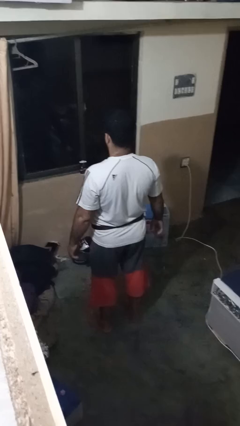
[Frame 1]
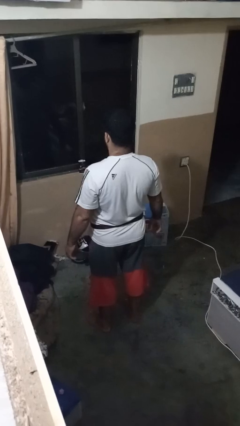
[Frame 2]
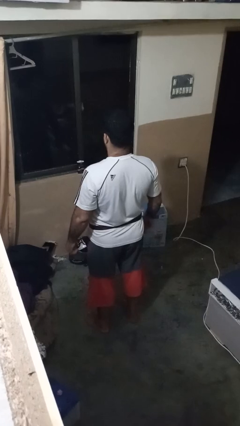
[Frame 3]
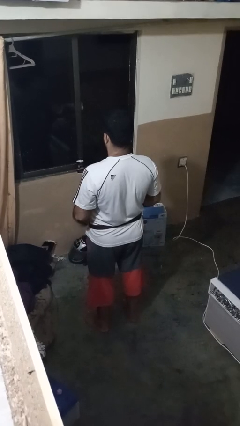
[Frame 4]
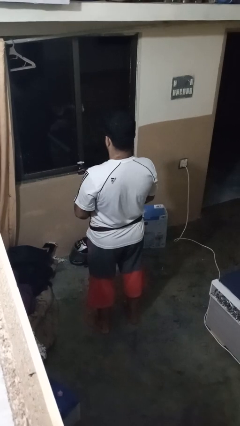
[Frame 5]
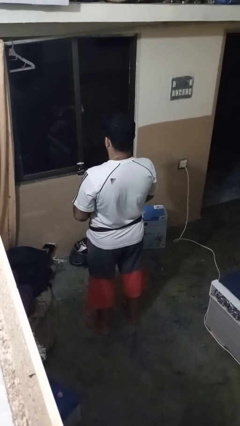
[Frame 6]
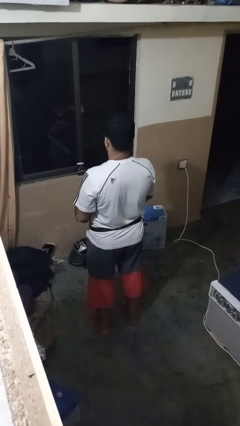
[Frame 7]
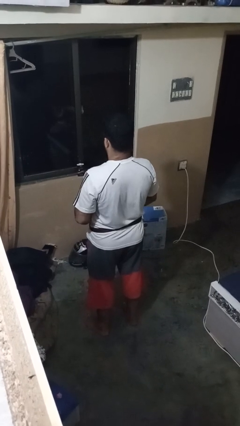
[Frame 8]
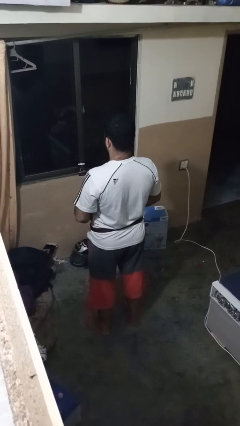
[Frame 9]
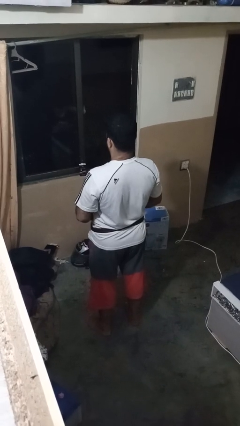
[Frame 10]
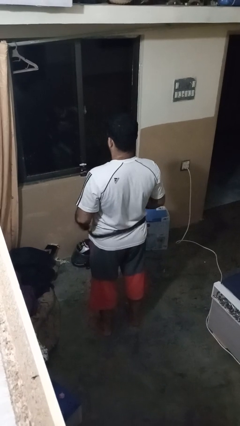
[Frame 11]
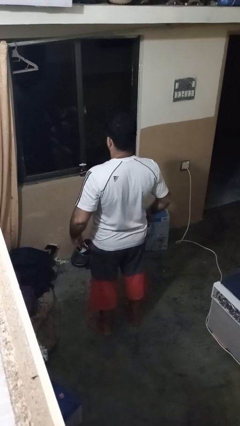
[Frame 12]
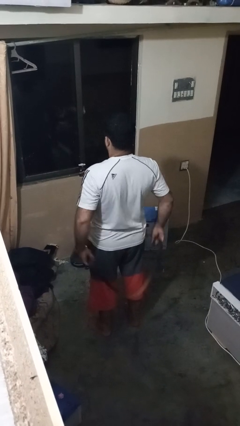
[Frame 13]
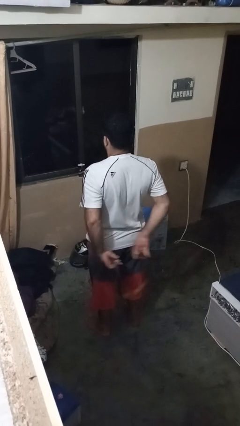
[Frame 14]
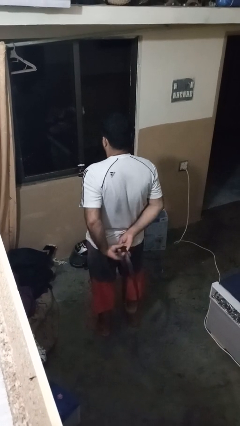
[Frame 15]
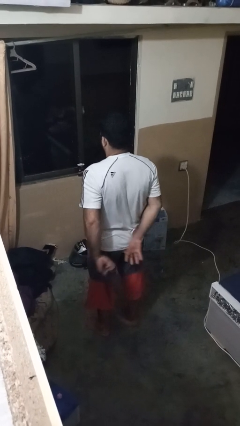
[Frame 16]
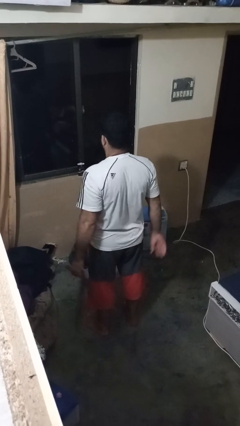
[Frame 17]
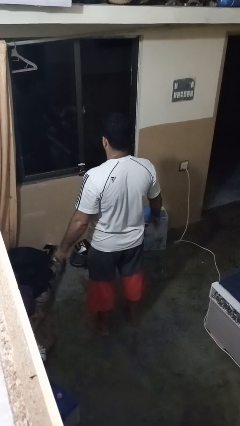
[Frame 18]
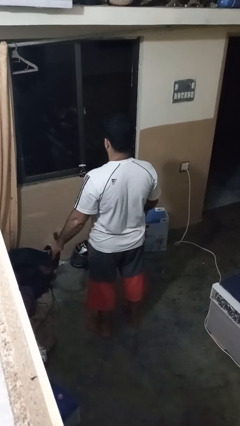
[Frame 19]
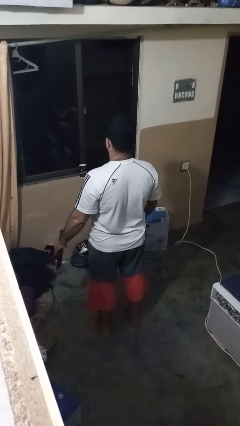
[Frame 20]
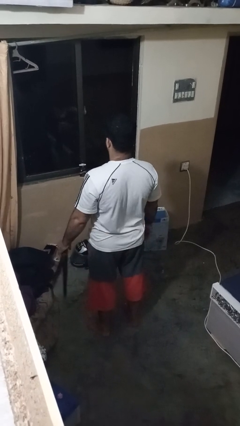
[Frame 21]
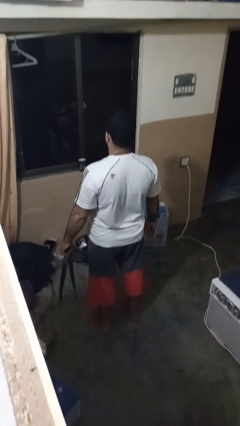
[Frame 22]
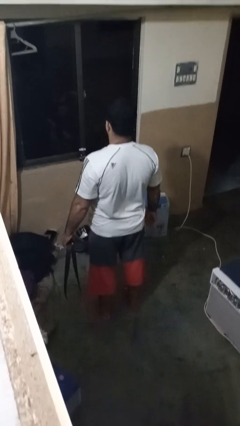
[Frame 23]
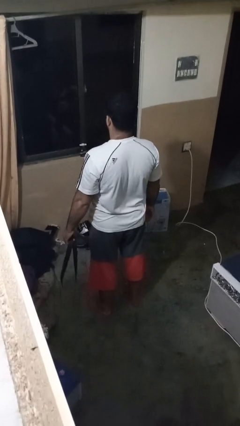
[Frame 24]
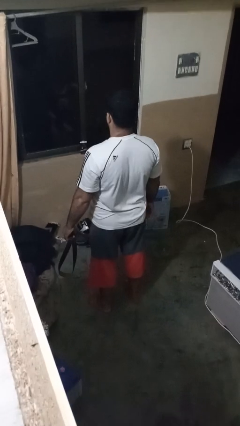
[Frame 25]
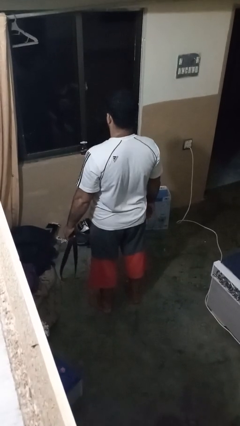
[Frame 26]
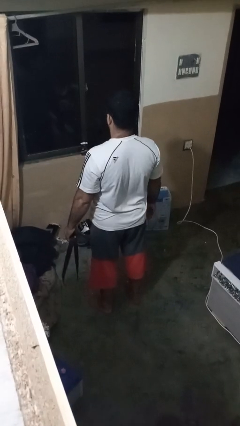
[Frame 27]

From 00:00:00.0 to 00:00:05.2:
person takes off belt

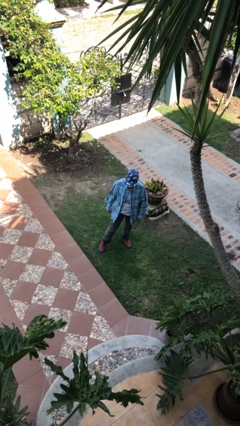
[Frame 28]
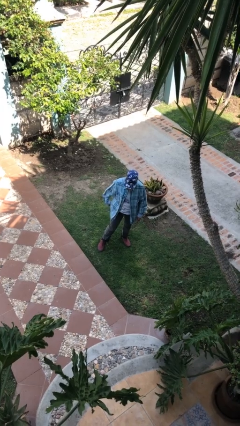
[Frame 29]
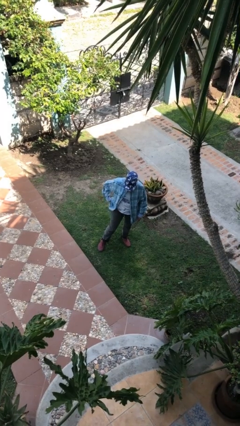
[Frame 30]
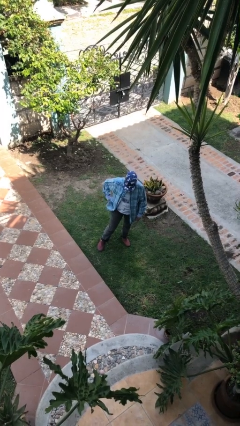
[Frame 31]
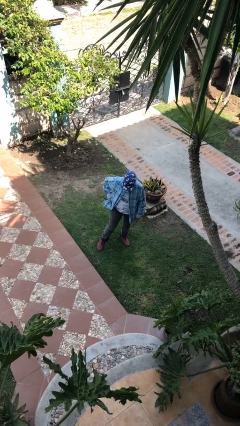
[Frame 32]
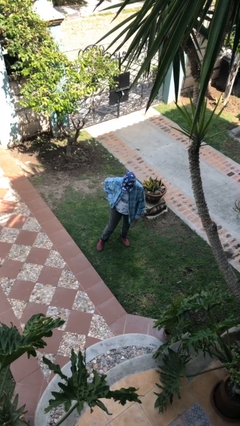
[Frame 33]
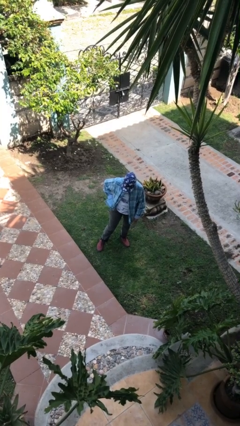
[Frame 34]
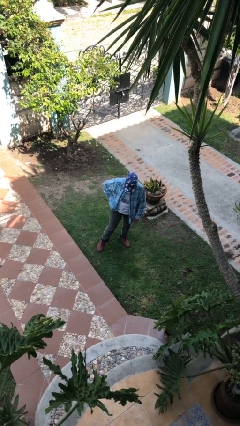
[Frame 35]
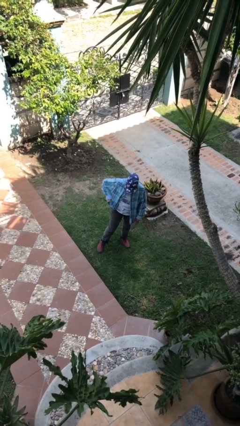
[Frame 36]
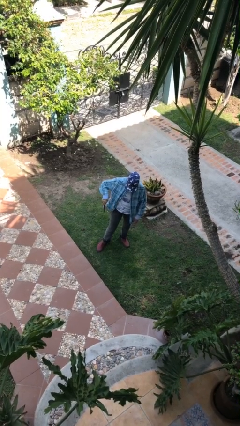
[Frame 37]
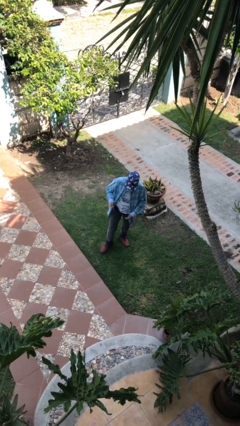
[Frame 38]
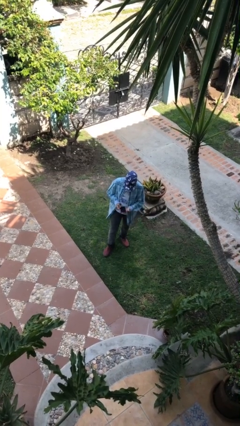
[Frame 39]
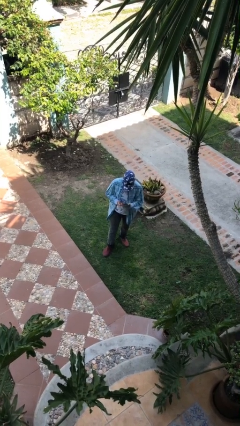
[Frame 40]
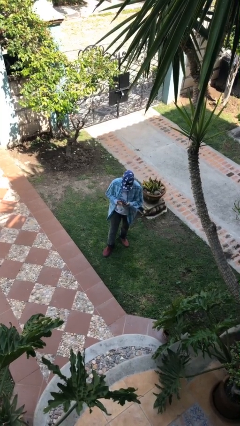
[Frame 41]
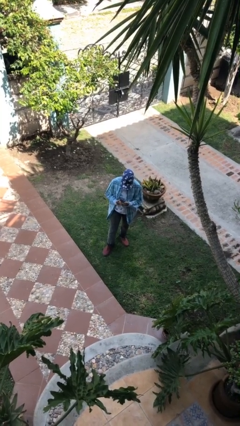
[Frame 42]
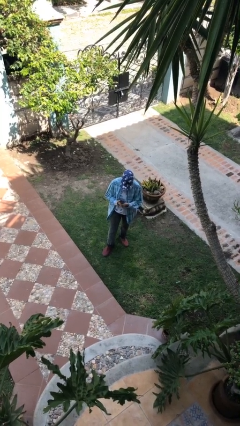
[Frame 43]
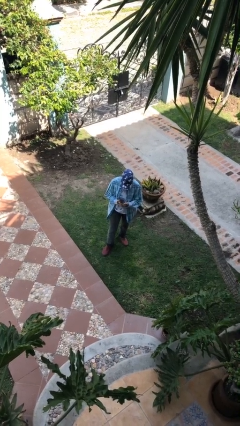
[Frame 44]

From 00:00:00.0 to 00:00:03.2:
person takes phone from pocket

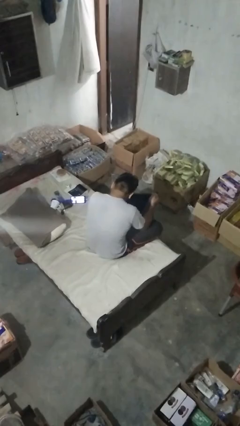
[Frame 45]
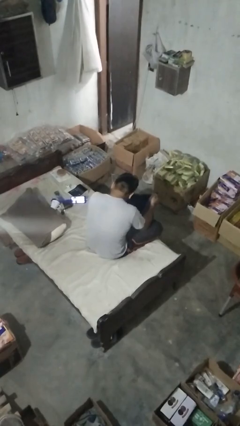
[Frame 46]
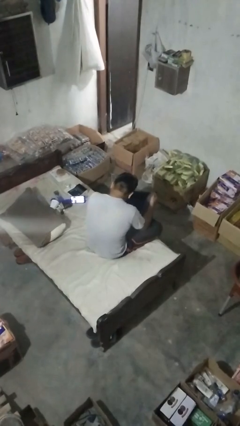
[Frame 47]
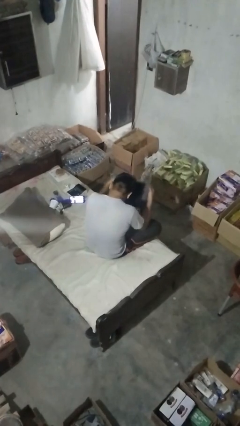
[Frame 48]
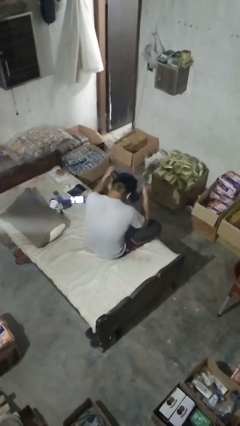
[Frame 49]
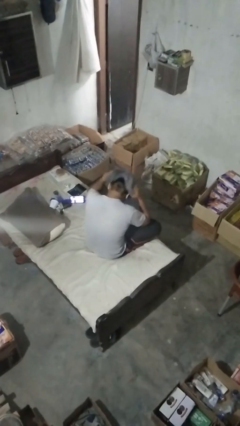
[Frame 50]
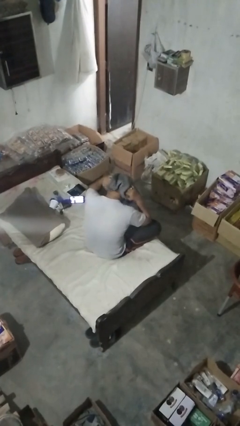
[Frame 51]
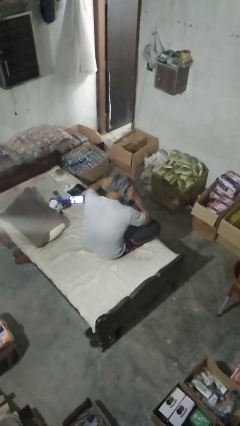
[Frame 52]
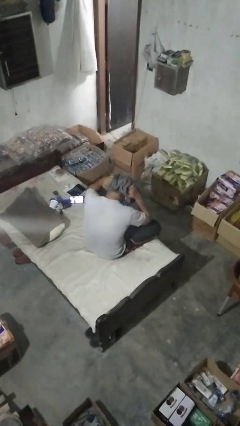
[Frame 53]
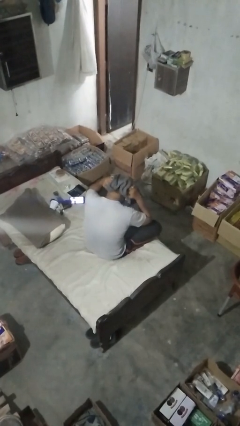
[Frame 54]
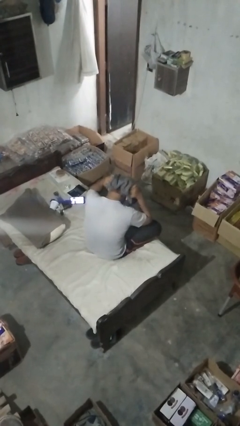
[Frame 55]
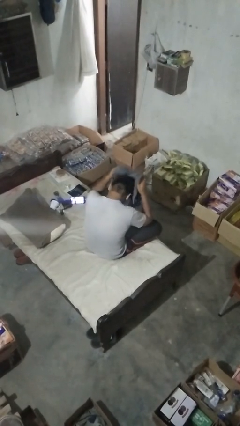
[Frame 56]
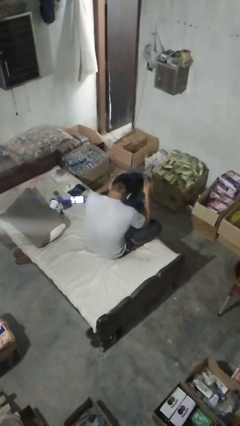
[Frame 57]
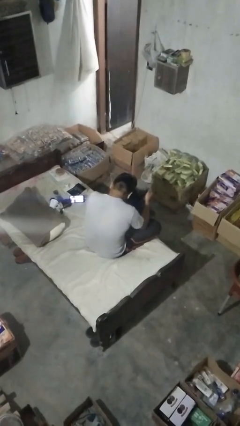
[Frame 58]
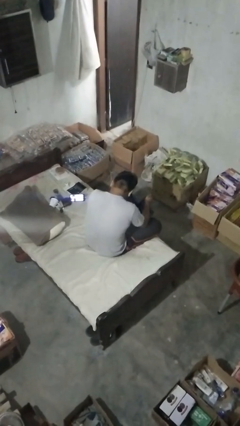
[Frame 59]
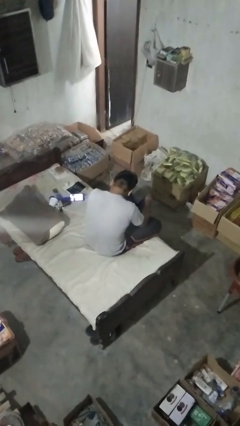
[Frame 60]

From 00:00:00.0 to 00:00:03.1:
person dries hair with towel

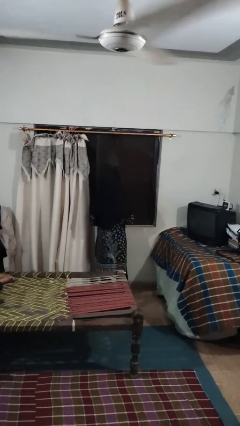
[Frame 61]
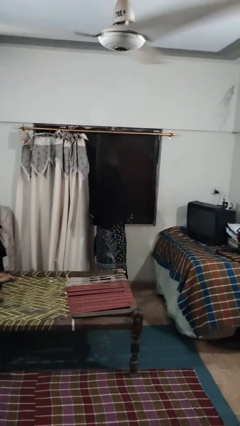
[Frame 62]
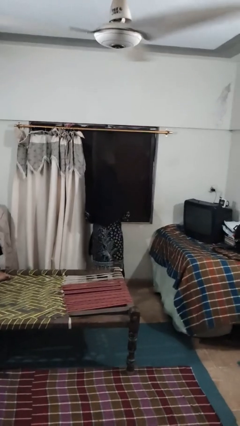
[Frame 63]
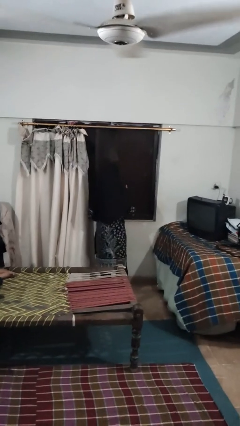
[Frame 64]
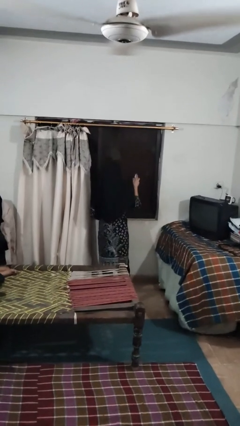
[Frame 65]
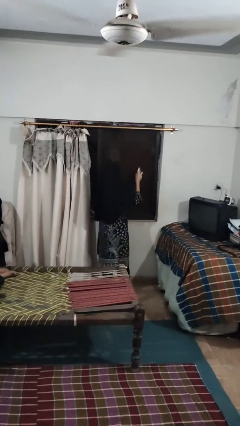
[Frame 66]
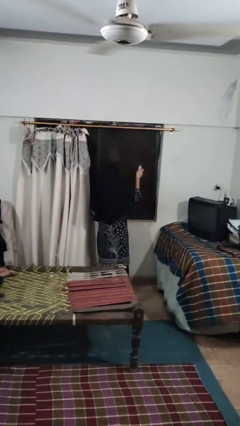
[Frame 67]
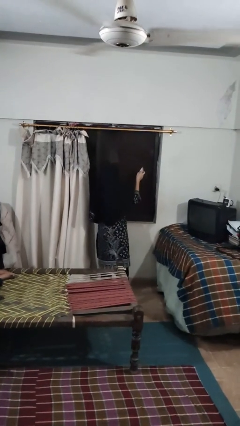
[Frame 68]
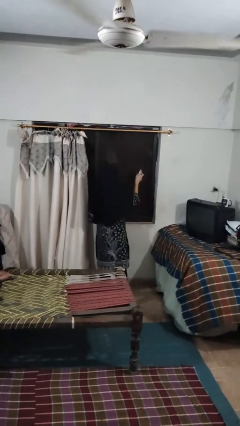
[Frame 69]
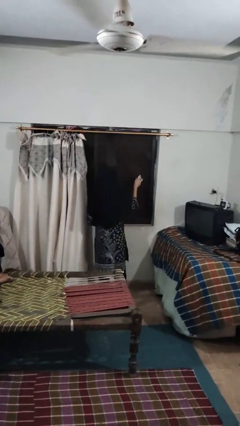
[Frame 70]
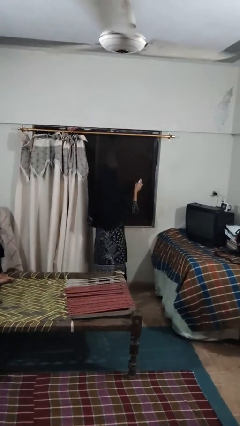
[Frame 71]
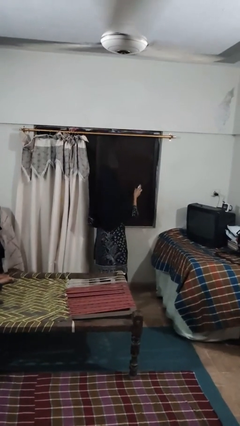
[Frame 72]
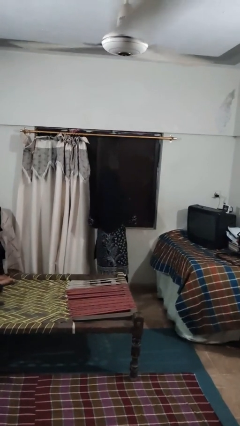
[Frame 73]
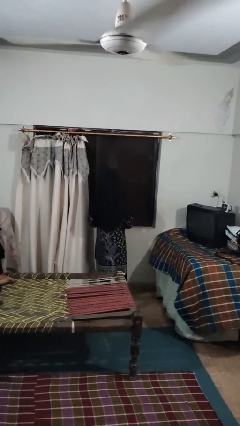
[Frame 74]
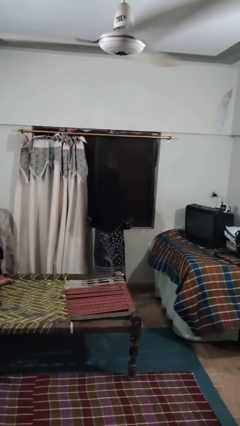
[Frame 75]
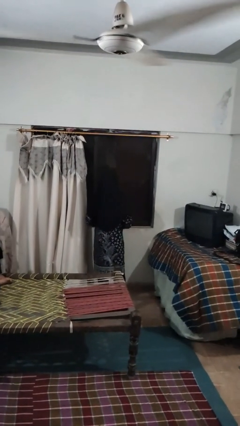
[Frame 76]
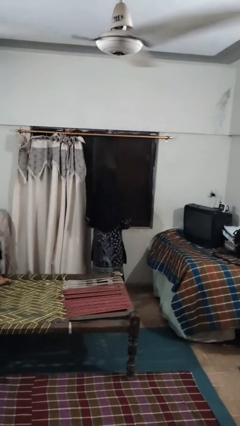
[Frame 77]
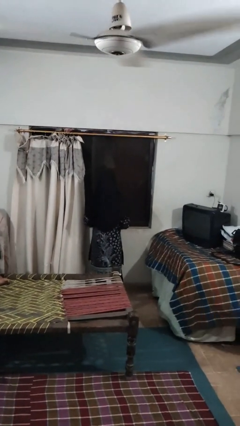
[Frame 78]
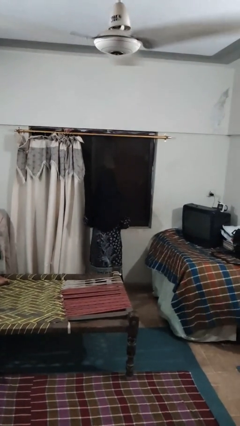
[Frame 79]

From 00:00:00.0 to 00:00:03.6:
person sprays from bottle

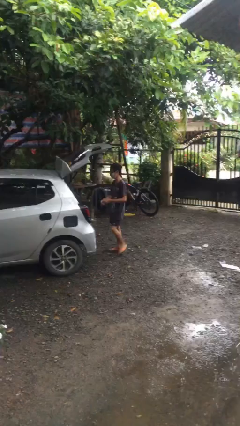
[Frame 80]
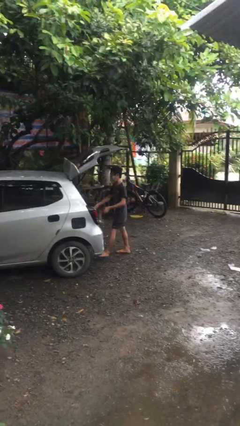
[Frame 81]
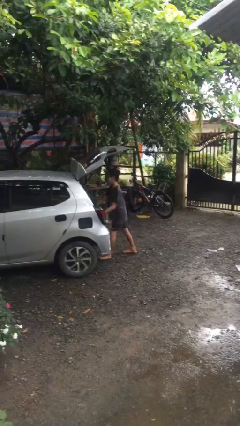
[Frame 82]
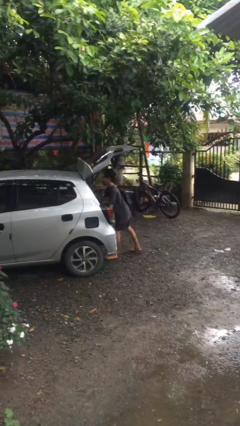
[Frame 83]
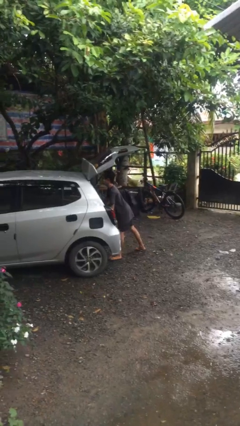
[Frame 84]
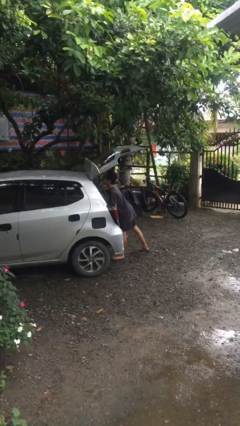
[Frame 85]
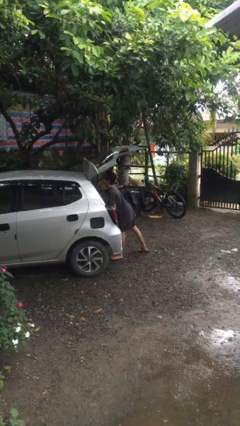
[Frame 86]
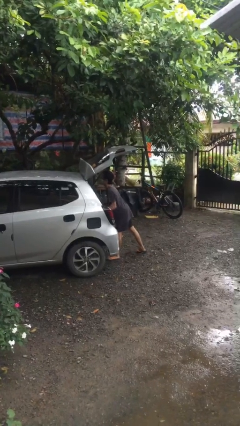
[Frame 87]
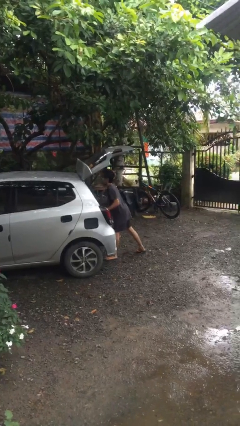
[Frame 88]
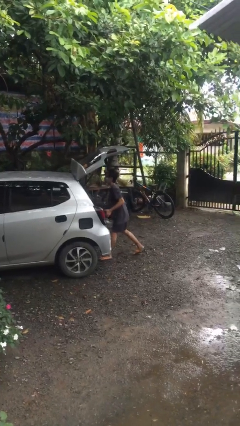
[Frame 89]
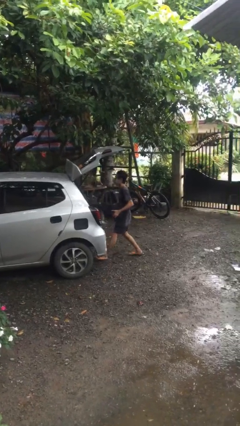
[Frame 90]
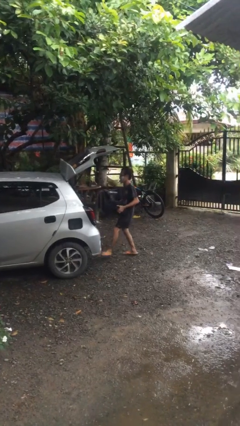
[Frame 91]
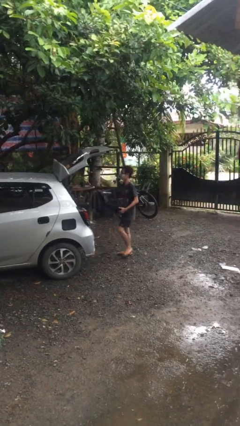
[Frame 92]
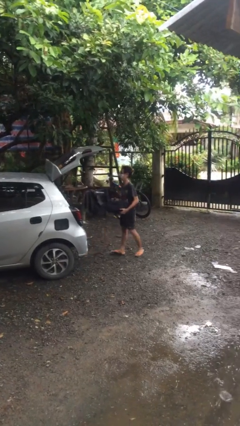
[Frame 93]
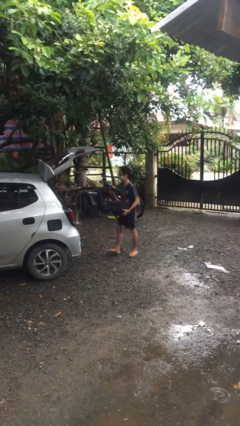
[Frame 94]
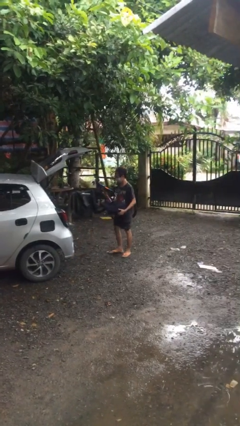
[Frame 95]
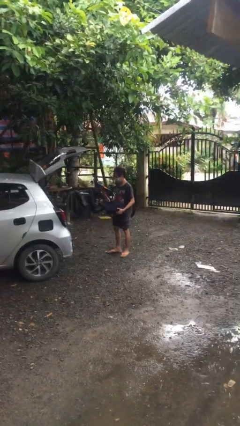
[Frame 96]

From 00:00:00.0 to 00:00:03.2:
person unloads car
